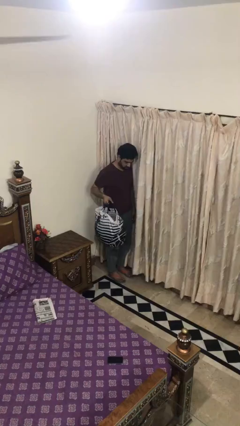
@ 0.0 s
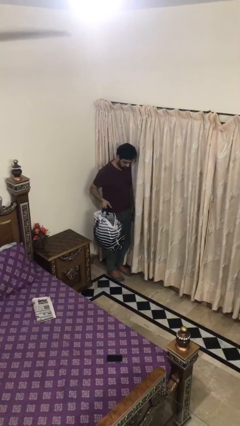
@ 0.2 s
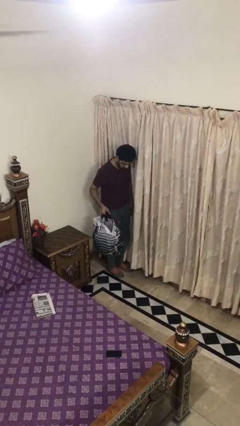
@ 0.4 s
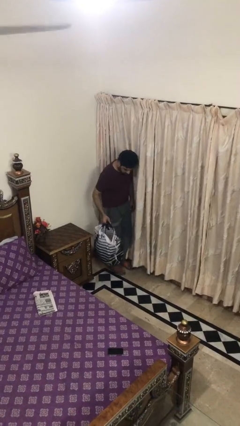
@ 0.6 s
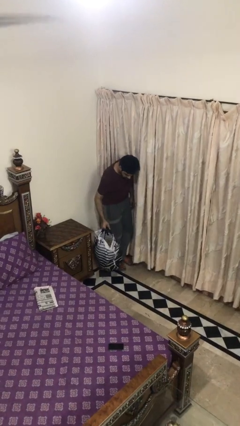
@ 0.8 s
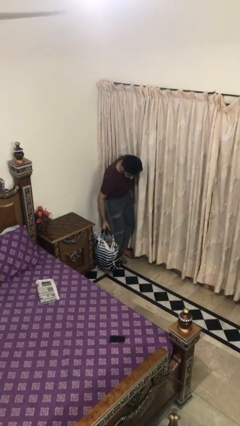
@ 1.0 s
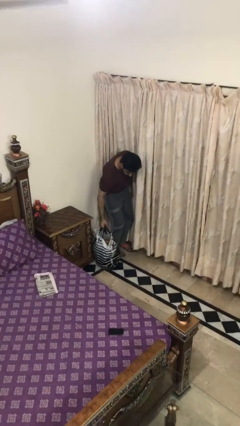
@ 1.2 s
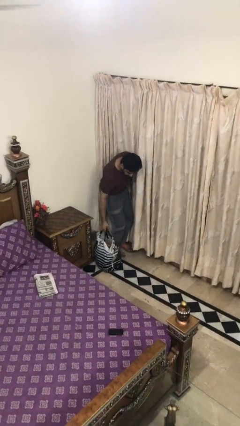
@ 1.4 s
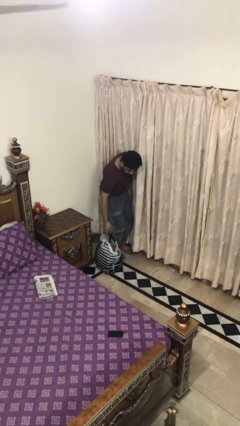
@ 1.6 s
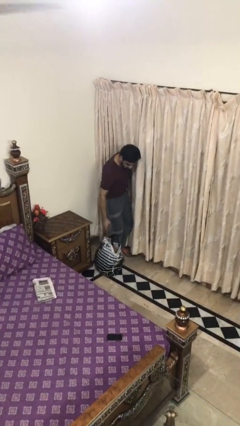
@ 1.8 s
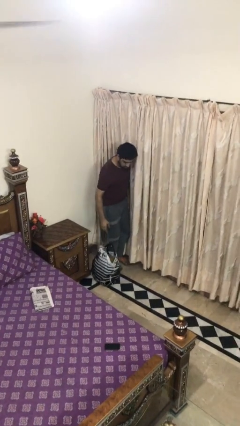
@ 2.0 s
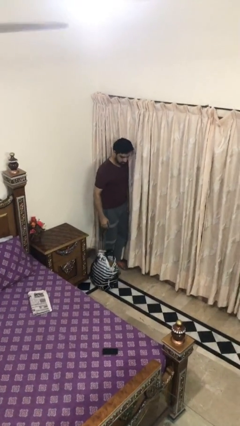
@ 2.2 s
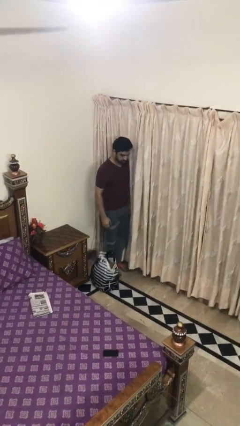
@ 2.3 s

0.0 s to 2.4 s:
person puts down object on floor

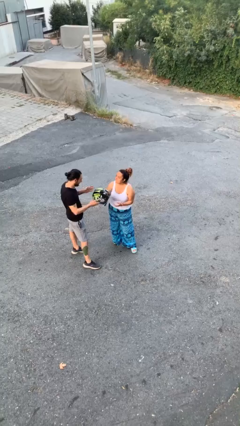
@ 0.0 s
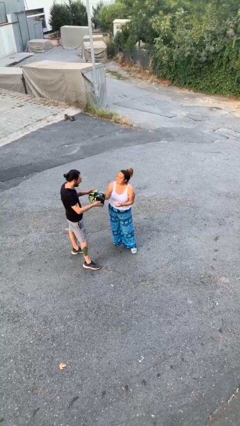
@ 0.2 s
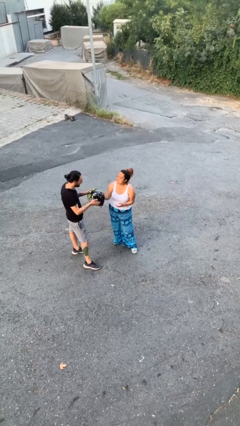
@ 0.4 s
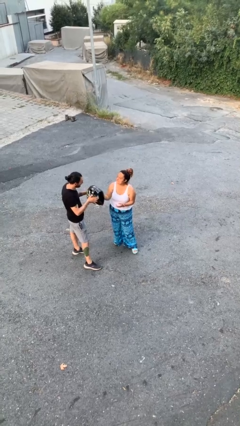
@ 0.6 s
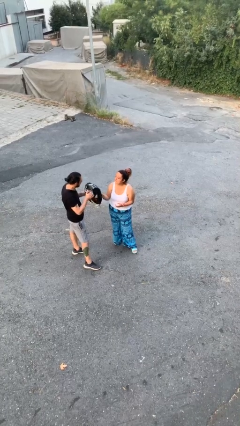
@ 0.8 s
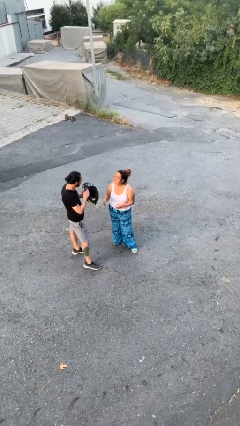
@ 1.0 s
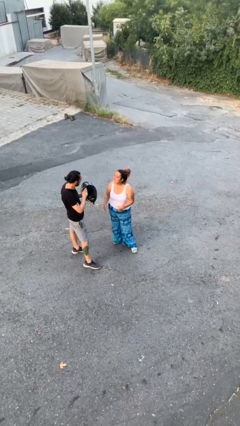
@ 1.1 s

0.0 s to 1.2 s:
person transfers object to person

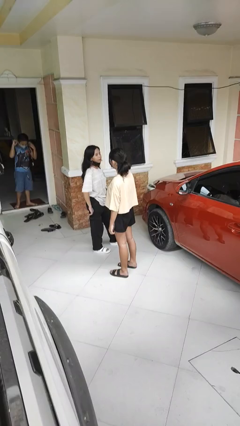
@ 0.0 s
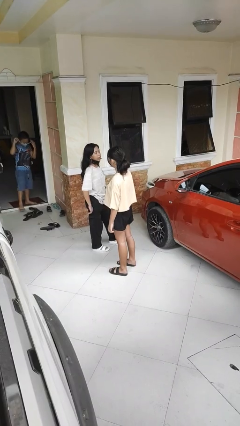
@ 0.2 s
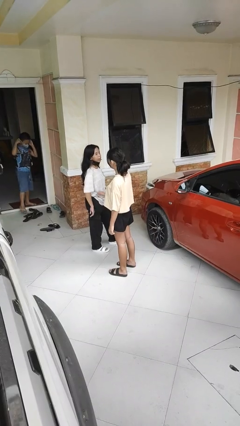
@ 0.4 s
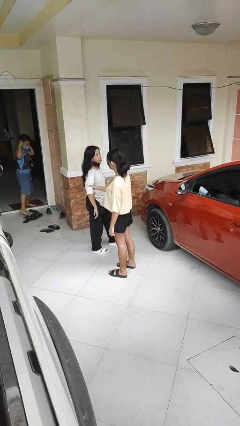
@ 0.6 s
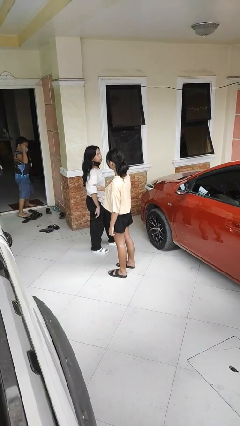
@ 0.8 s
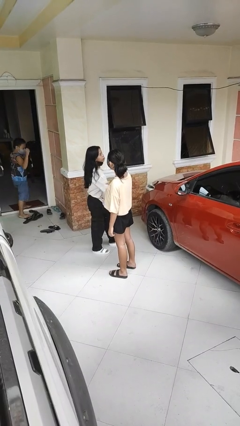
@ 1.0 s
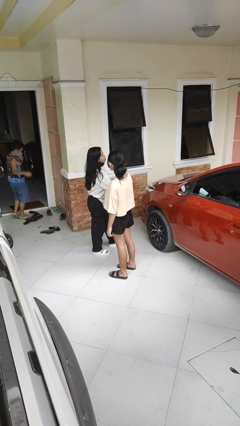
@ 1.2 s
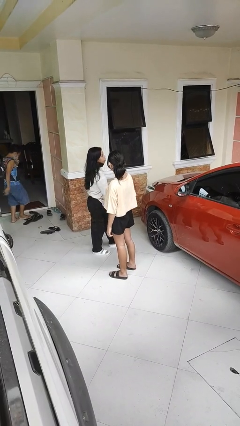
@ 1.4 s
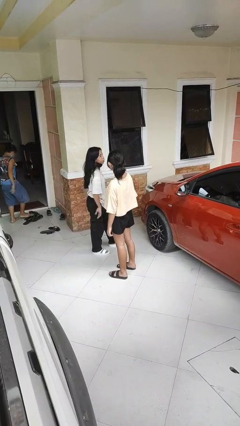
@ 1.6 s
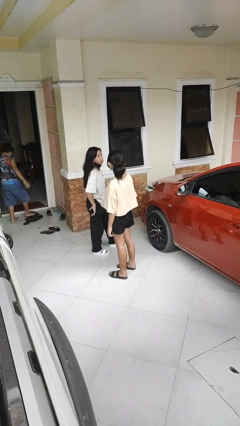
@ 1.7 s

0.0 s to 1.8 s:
person grabs person by bicep

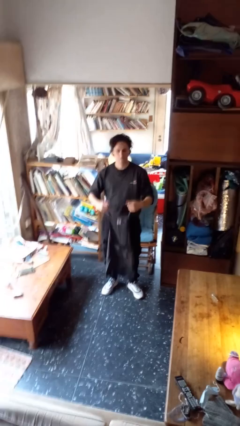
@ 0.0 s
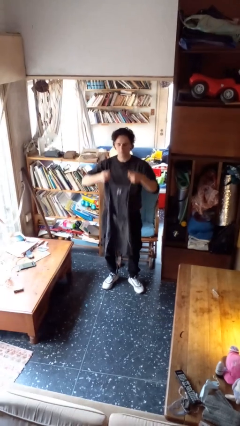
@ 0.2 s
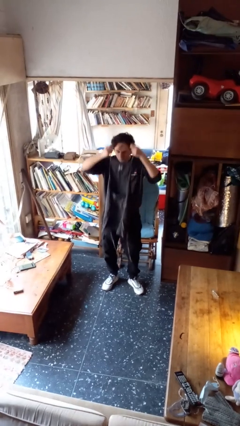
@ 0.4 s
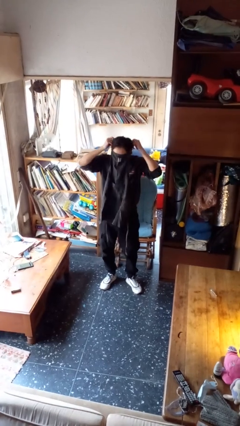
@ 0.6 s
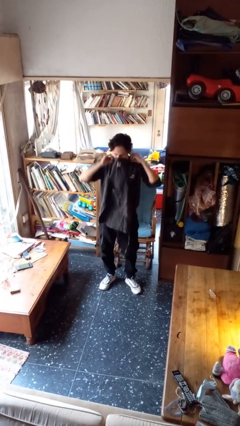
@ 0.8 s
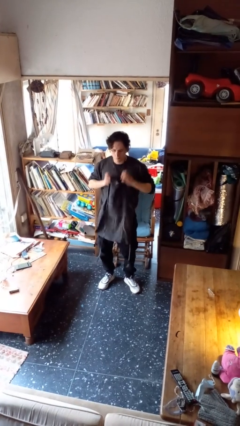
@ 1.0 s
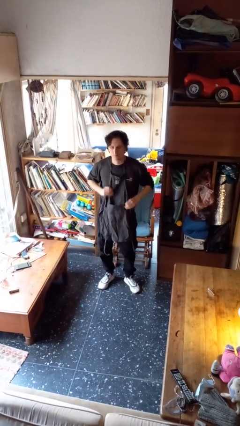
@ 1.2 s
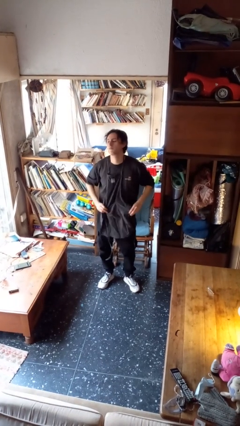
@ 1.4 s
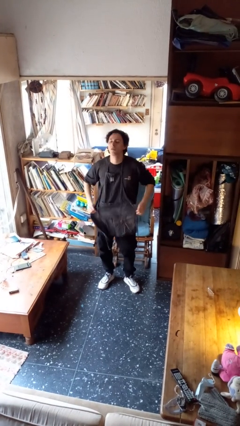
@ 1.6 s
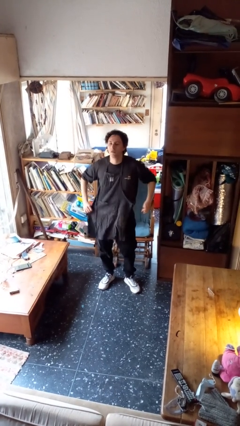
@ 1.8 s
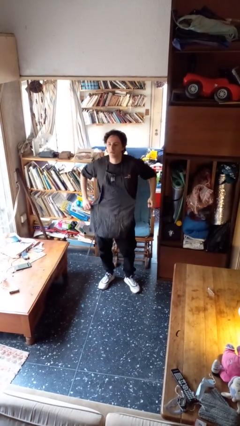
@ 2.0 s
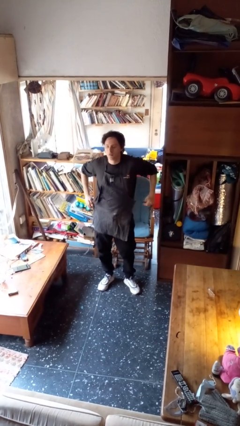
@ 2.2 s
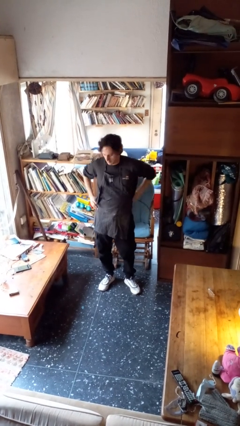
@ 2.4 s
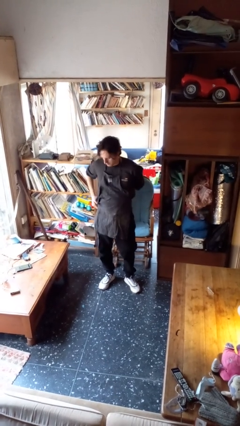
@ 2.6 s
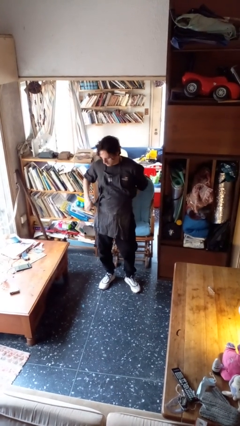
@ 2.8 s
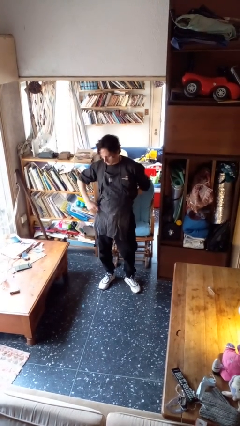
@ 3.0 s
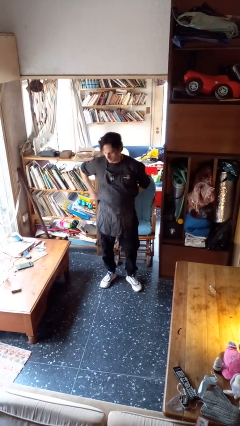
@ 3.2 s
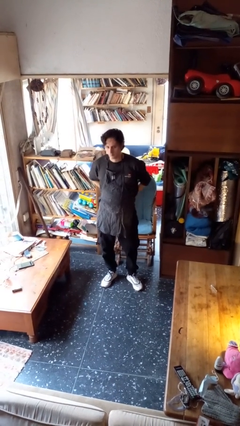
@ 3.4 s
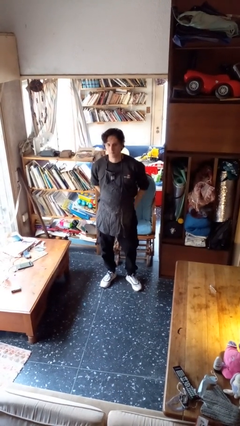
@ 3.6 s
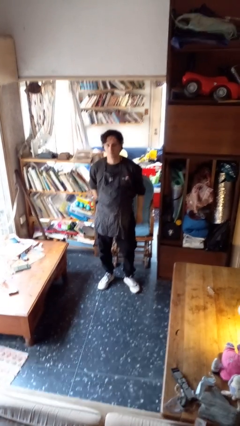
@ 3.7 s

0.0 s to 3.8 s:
person puts on apron

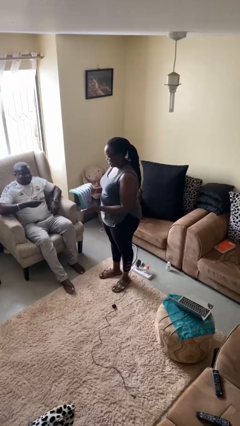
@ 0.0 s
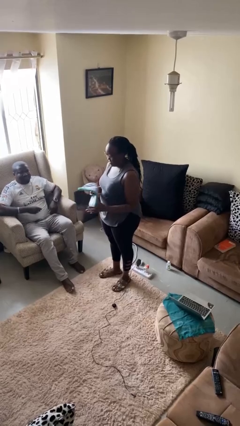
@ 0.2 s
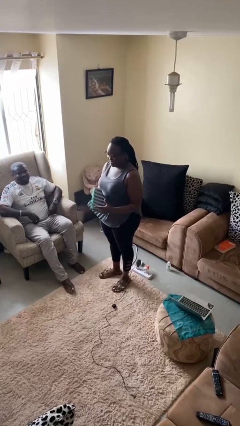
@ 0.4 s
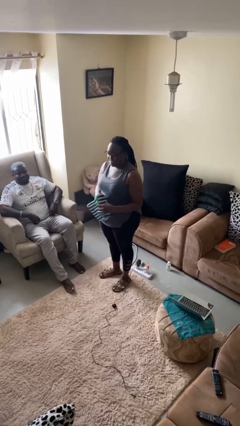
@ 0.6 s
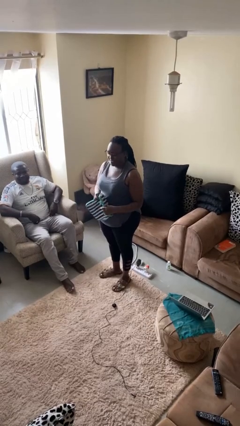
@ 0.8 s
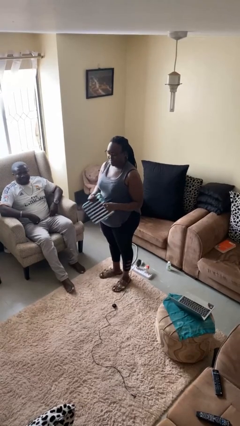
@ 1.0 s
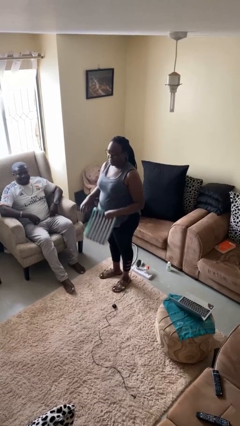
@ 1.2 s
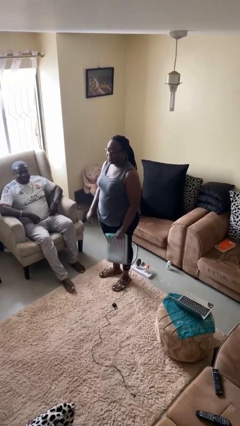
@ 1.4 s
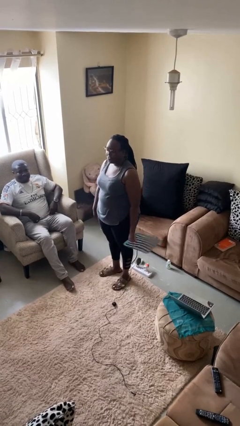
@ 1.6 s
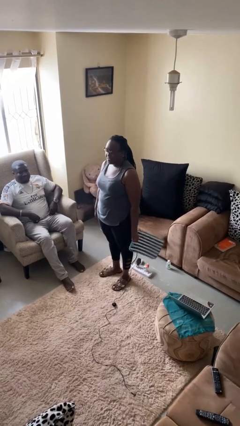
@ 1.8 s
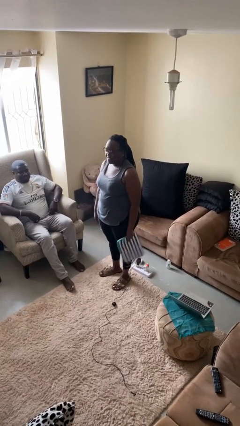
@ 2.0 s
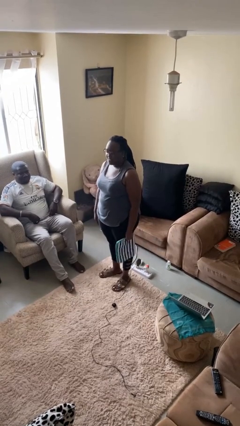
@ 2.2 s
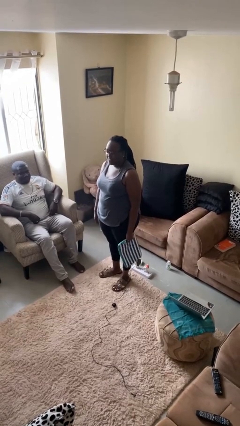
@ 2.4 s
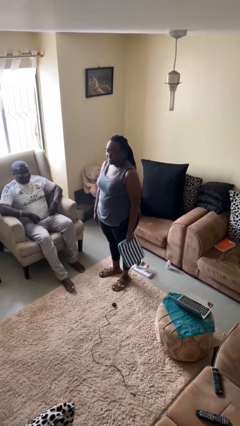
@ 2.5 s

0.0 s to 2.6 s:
person catches object from person

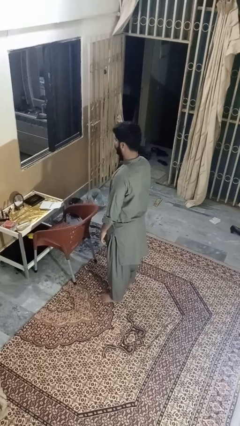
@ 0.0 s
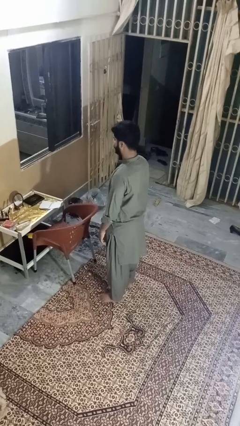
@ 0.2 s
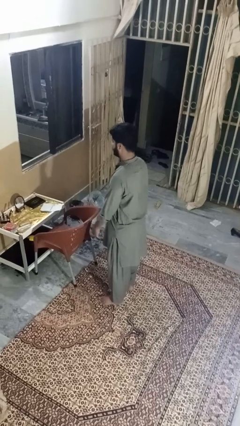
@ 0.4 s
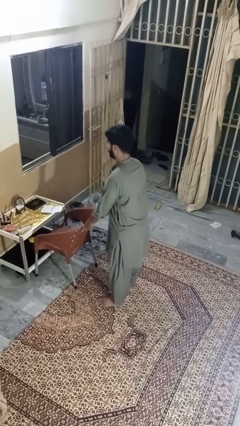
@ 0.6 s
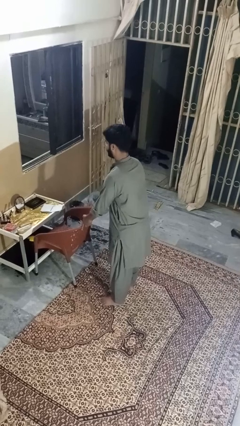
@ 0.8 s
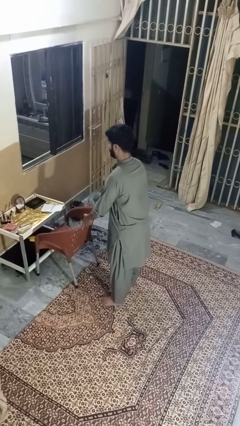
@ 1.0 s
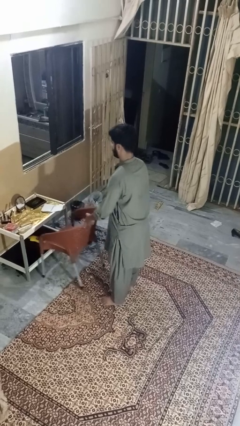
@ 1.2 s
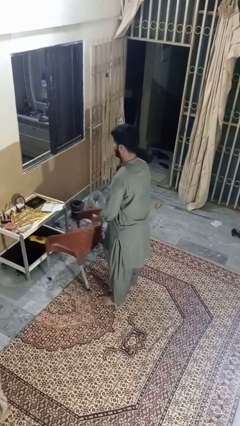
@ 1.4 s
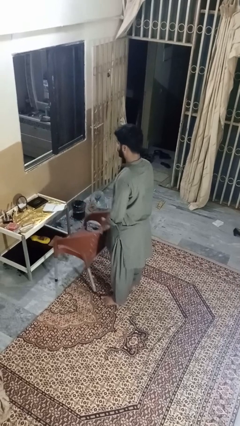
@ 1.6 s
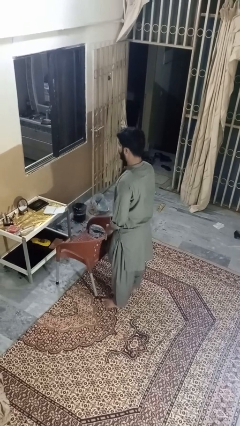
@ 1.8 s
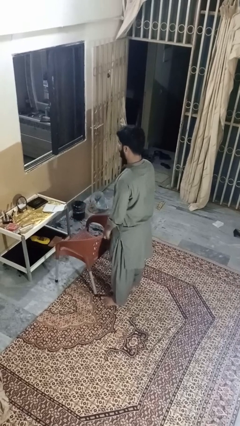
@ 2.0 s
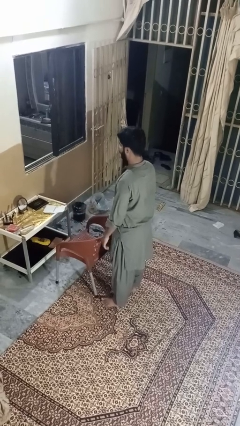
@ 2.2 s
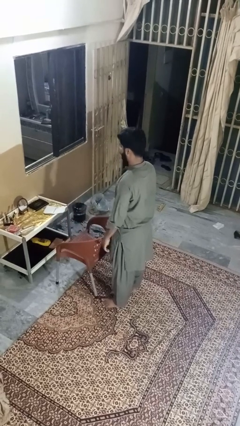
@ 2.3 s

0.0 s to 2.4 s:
person pulls out chair

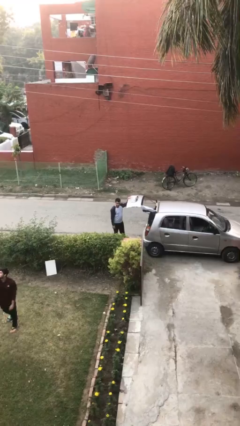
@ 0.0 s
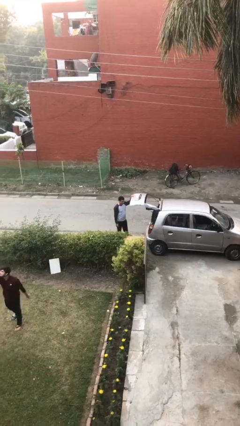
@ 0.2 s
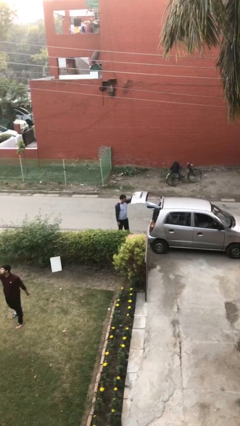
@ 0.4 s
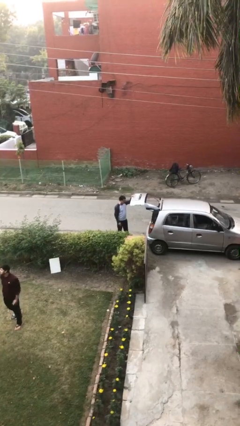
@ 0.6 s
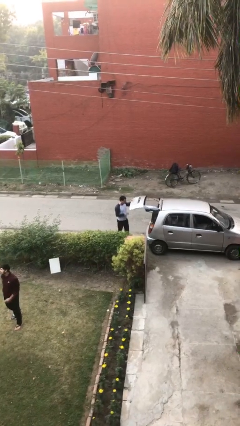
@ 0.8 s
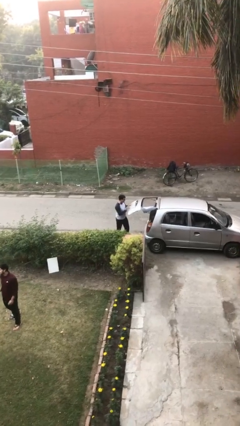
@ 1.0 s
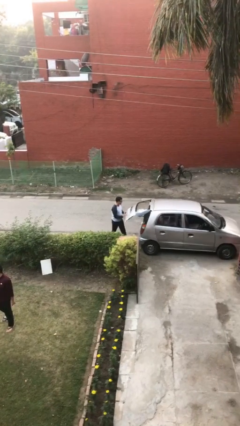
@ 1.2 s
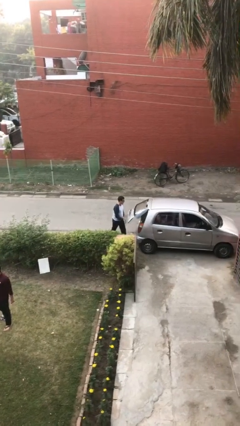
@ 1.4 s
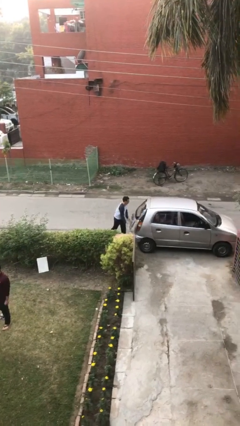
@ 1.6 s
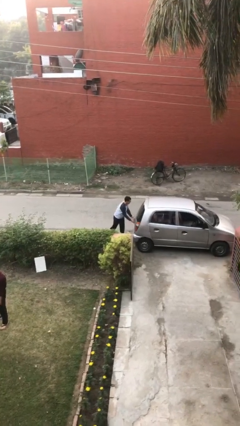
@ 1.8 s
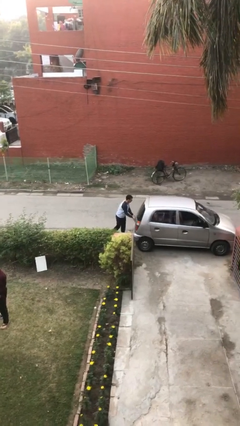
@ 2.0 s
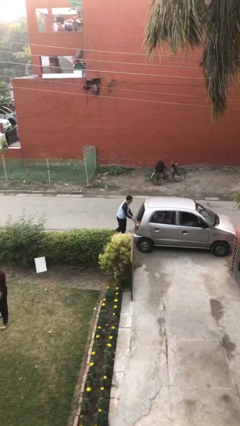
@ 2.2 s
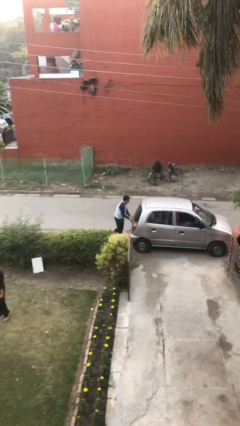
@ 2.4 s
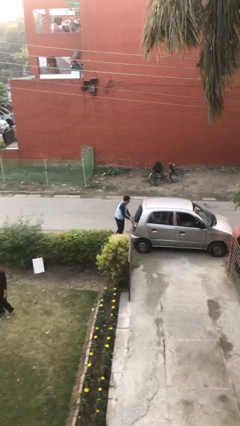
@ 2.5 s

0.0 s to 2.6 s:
person closes car trunk

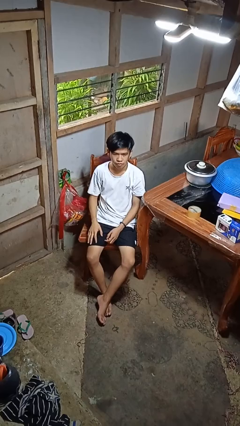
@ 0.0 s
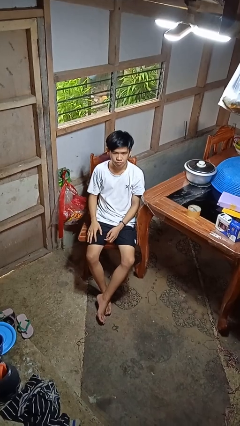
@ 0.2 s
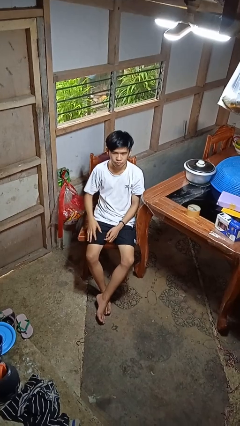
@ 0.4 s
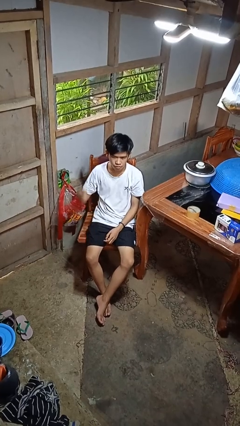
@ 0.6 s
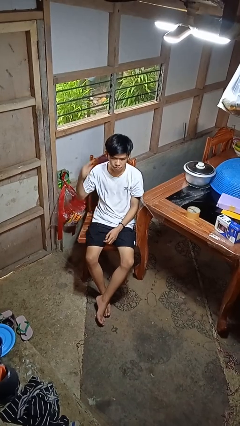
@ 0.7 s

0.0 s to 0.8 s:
person gestures listen closely
